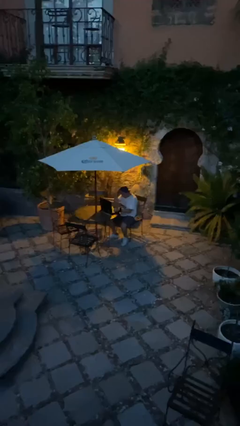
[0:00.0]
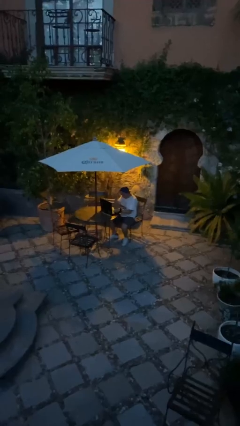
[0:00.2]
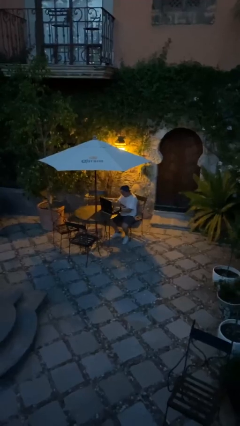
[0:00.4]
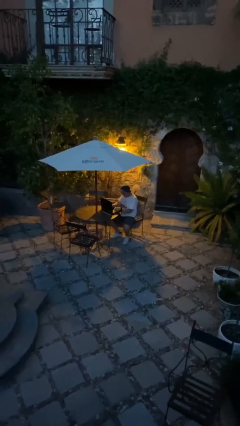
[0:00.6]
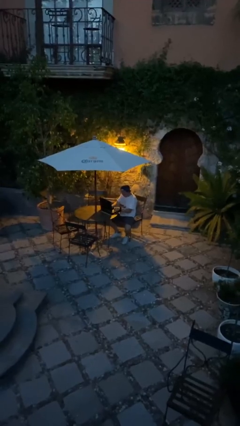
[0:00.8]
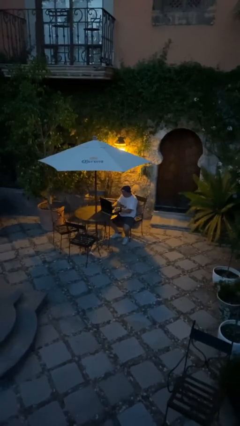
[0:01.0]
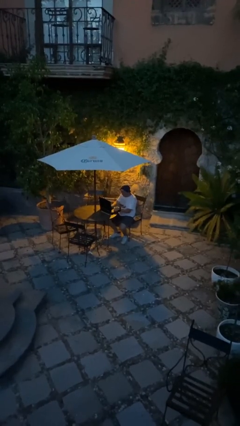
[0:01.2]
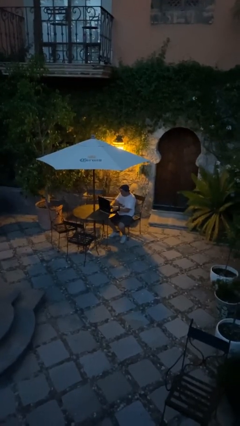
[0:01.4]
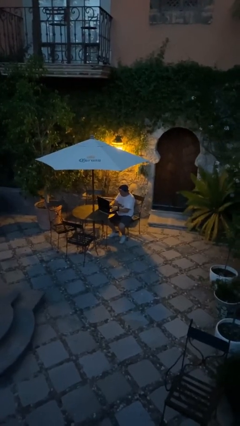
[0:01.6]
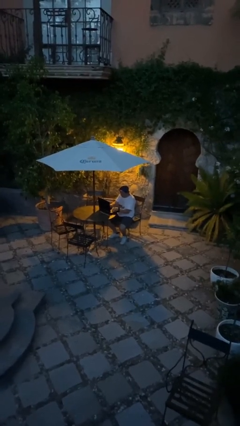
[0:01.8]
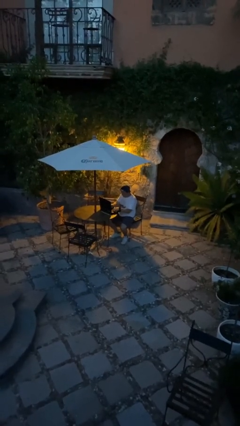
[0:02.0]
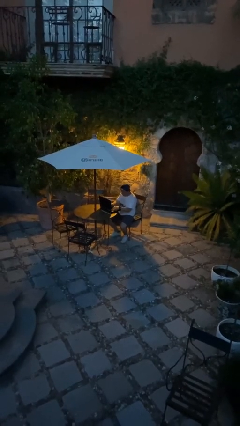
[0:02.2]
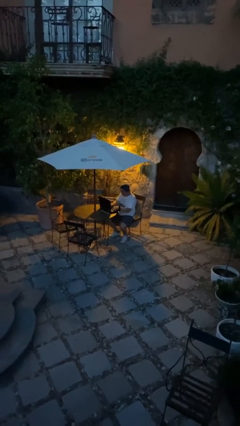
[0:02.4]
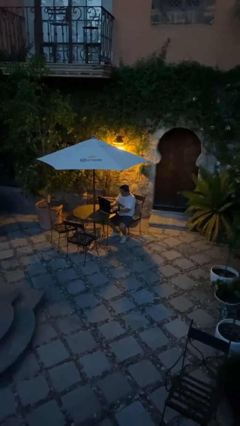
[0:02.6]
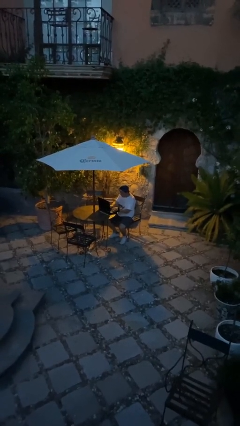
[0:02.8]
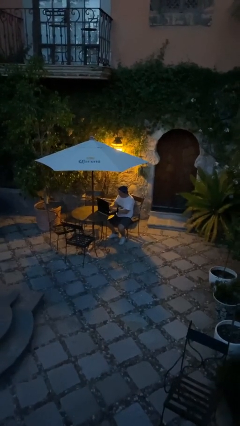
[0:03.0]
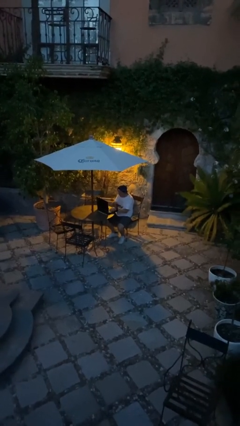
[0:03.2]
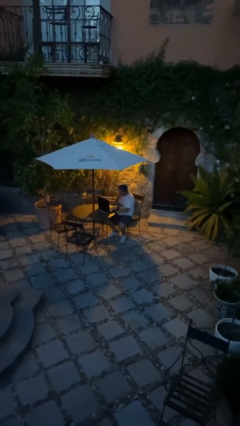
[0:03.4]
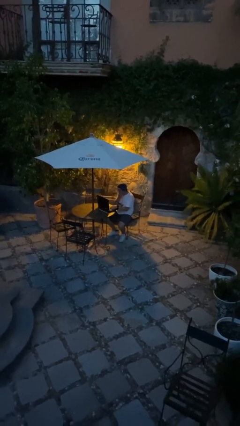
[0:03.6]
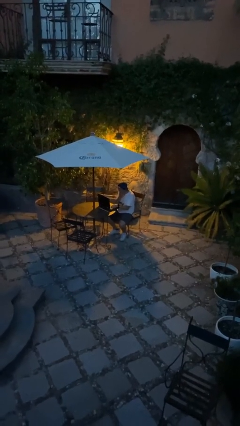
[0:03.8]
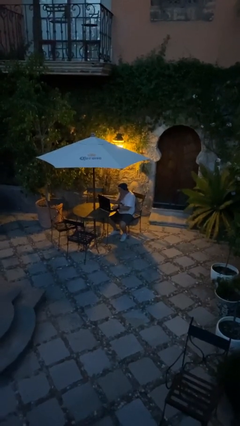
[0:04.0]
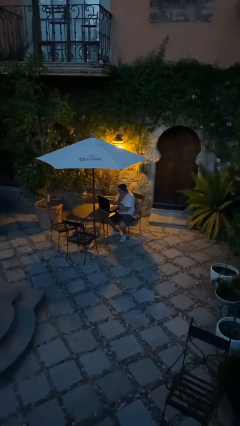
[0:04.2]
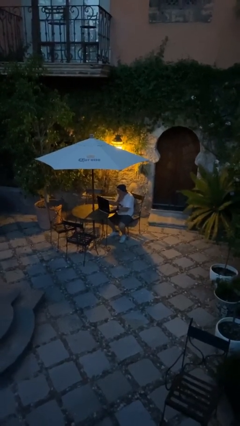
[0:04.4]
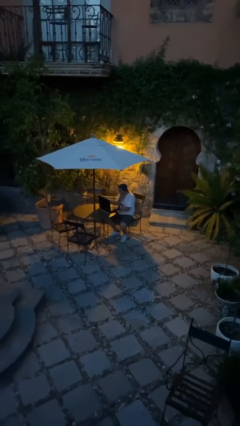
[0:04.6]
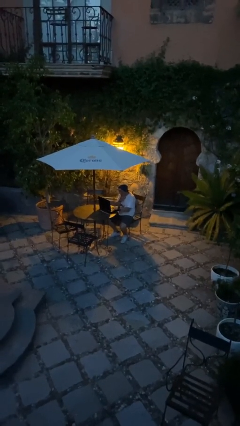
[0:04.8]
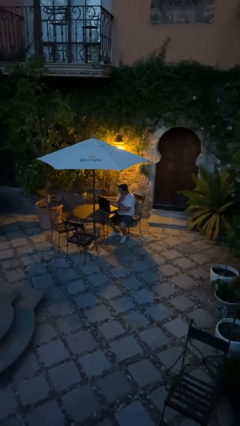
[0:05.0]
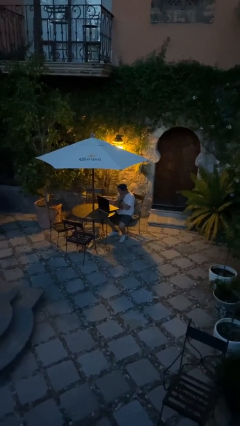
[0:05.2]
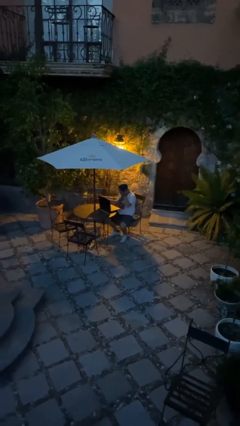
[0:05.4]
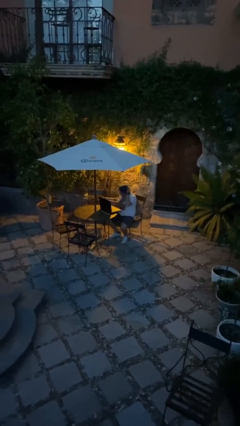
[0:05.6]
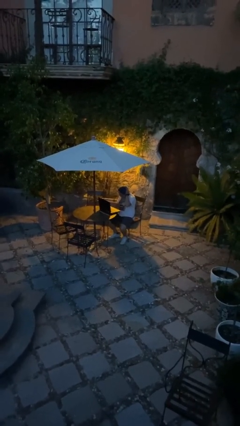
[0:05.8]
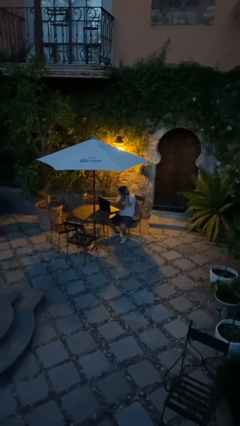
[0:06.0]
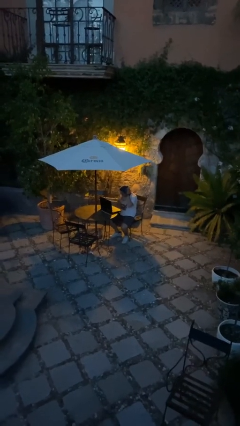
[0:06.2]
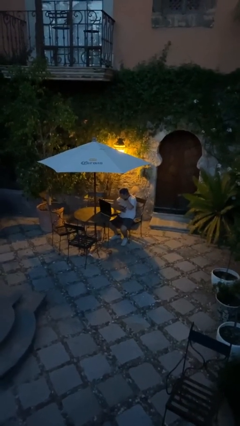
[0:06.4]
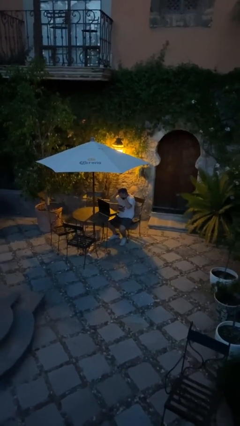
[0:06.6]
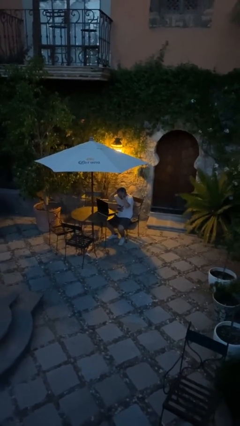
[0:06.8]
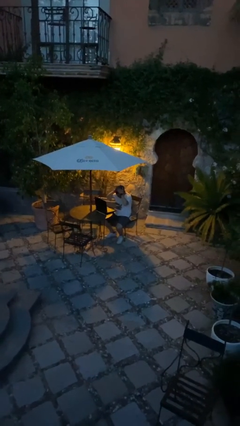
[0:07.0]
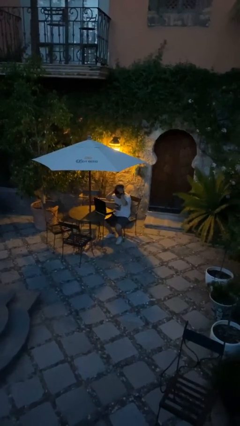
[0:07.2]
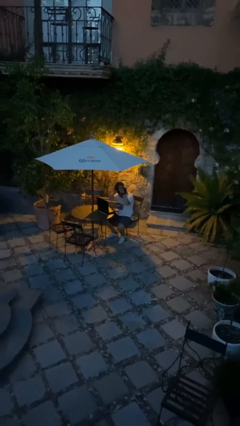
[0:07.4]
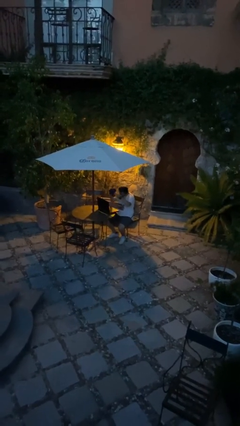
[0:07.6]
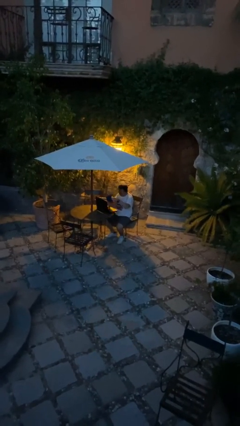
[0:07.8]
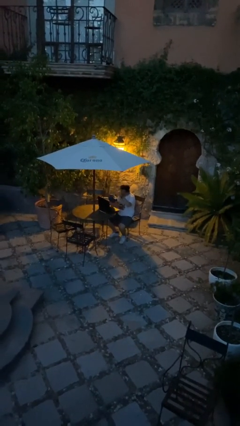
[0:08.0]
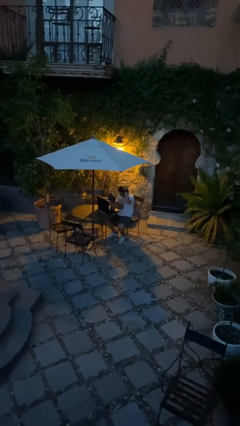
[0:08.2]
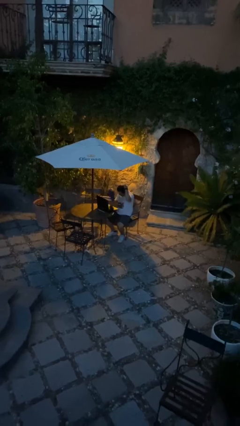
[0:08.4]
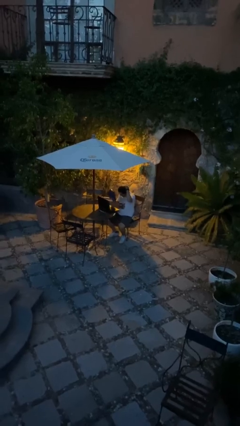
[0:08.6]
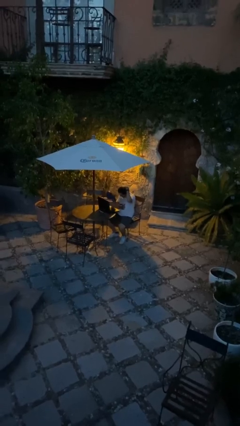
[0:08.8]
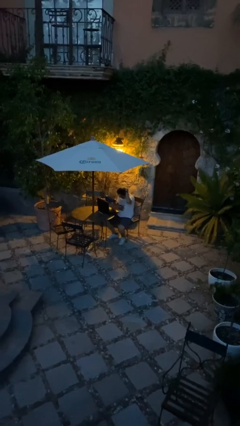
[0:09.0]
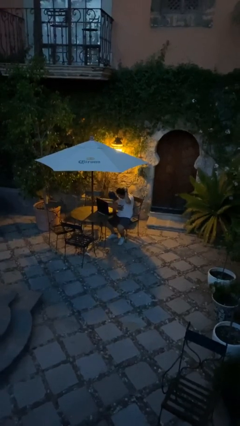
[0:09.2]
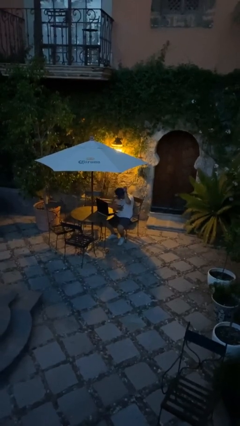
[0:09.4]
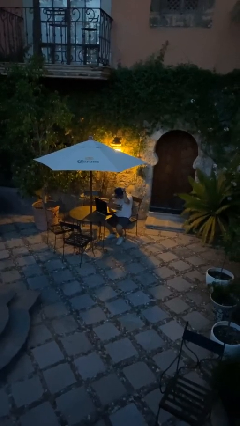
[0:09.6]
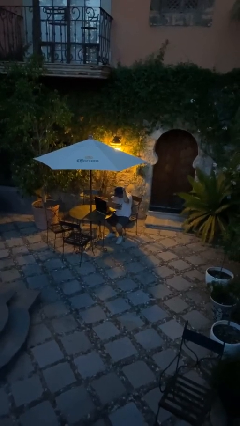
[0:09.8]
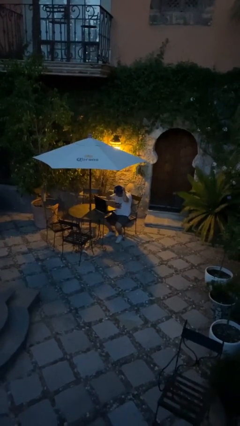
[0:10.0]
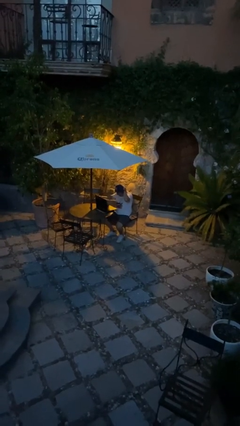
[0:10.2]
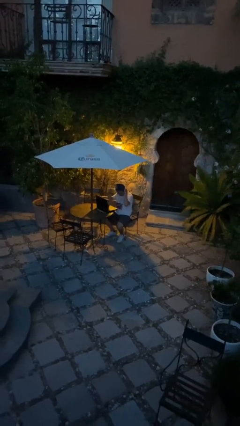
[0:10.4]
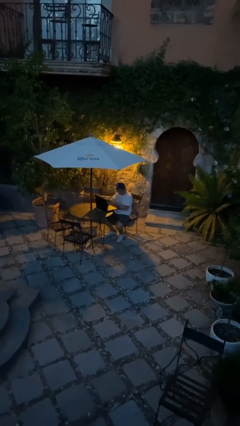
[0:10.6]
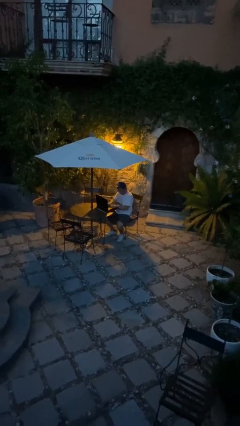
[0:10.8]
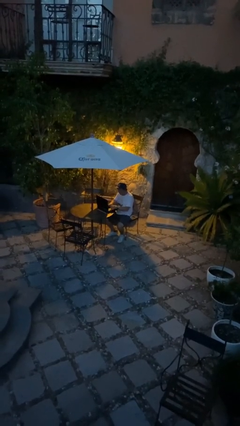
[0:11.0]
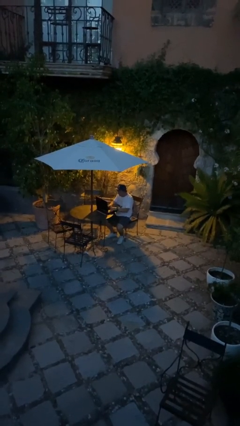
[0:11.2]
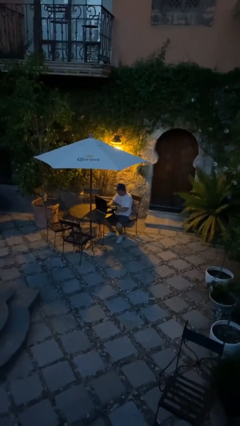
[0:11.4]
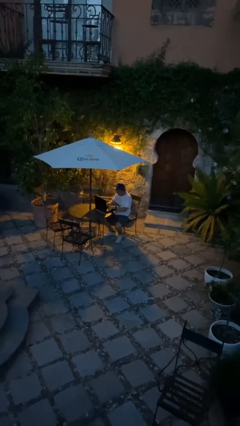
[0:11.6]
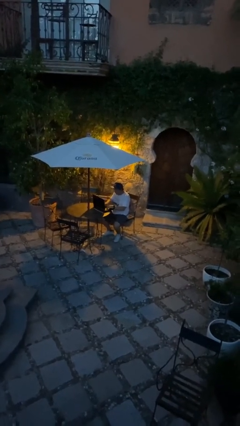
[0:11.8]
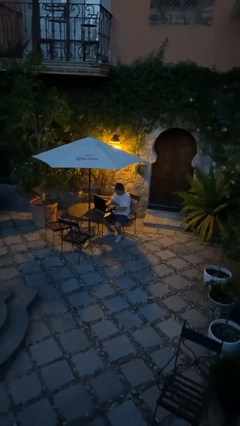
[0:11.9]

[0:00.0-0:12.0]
person interacts with laptop

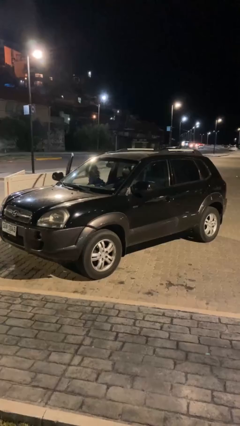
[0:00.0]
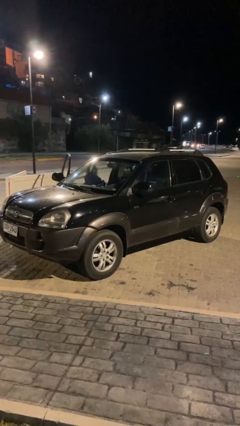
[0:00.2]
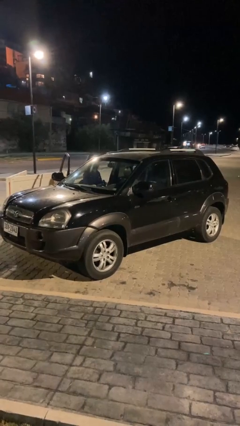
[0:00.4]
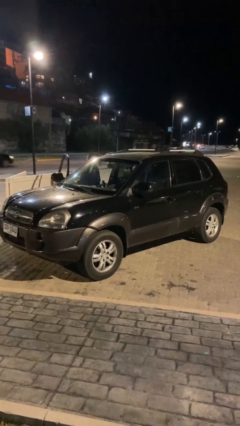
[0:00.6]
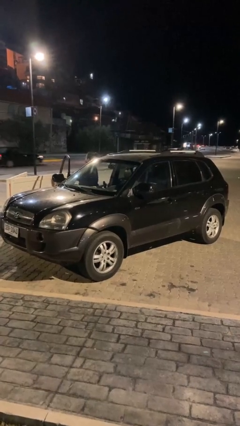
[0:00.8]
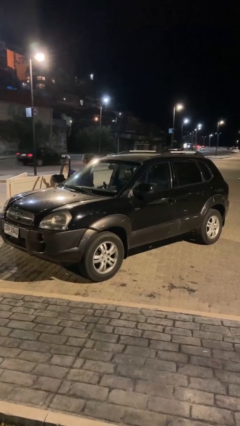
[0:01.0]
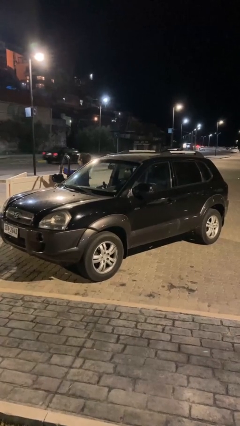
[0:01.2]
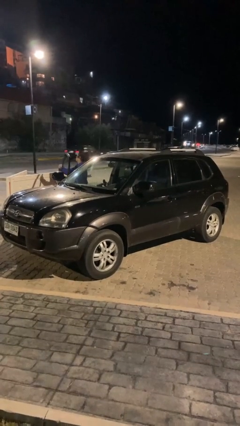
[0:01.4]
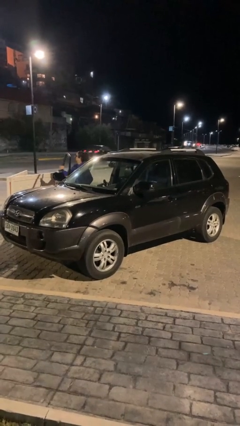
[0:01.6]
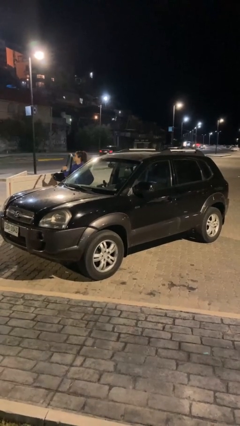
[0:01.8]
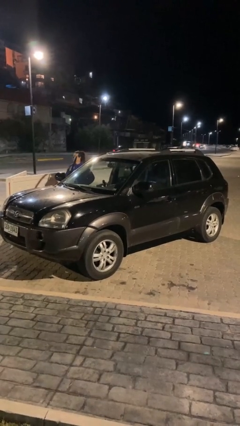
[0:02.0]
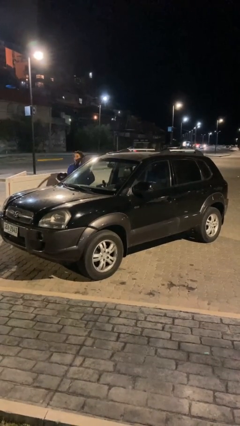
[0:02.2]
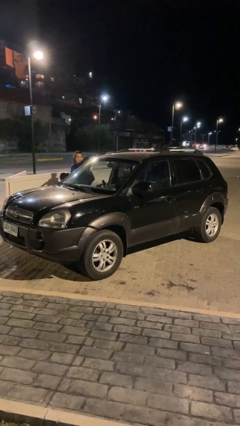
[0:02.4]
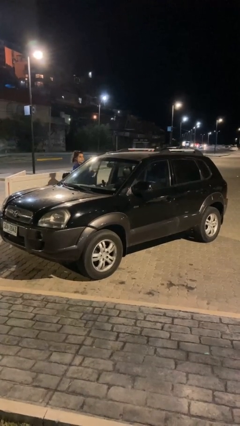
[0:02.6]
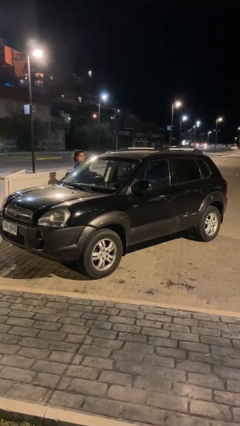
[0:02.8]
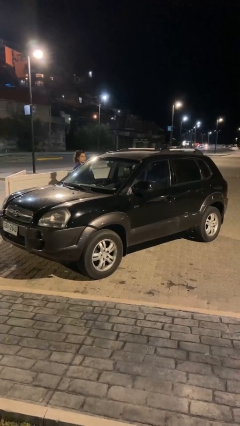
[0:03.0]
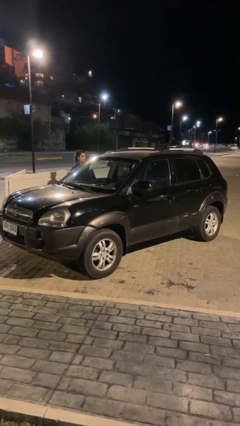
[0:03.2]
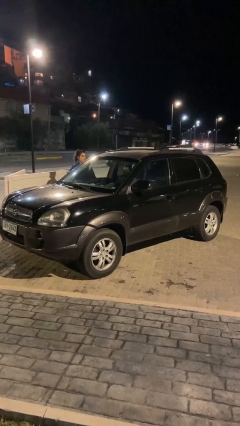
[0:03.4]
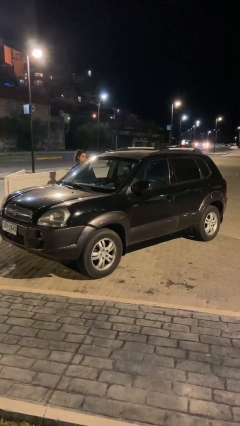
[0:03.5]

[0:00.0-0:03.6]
car drops off person

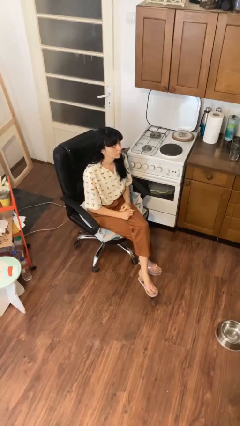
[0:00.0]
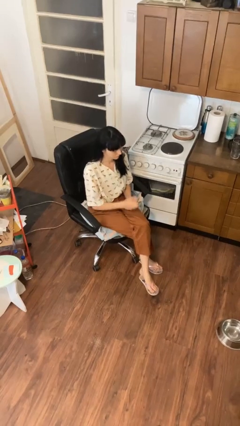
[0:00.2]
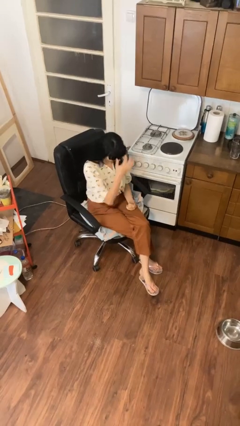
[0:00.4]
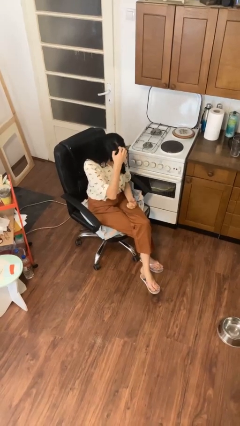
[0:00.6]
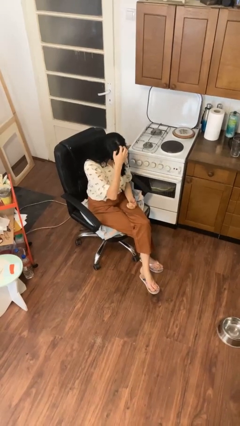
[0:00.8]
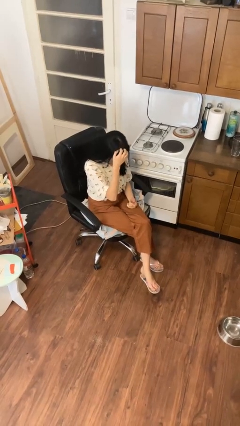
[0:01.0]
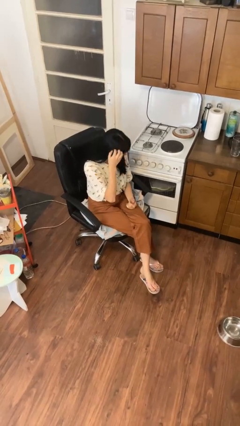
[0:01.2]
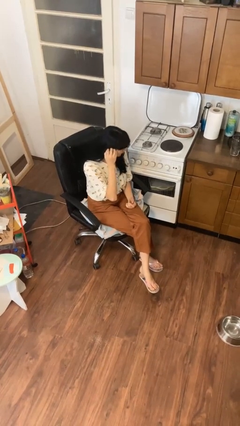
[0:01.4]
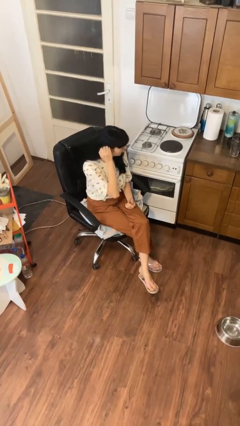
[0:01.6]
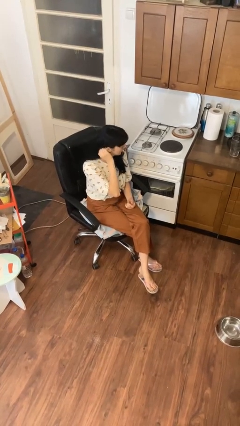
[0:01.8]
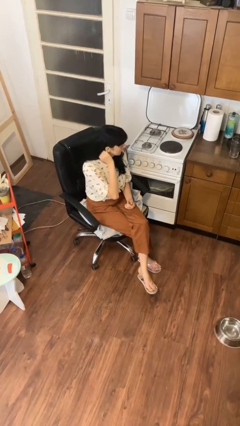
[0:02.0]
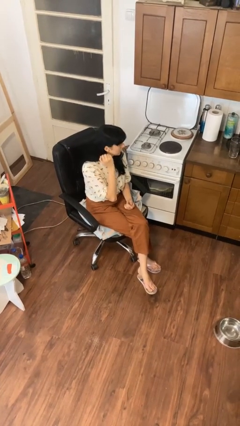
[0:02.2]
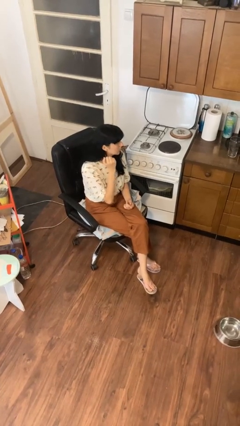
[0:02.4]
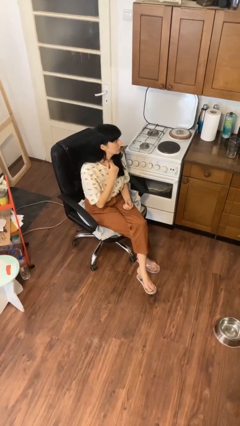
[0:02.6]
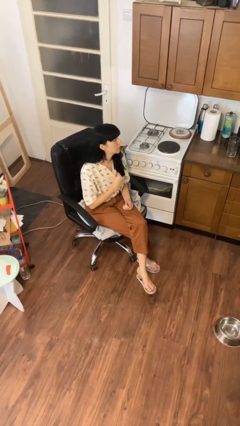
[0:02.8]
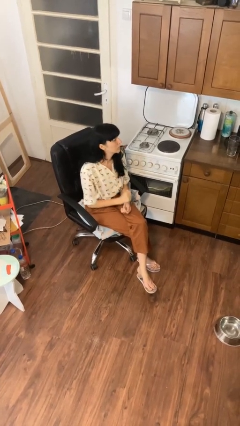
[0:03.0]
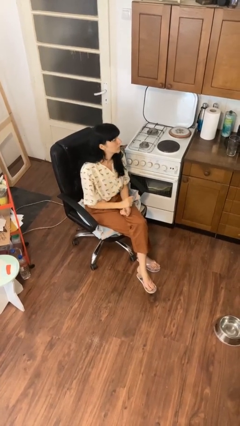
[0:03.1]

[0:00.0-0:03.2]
person strokes hair
